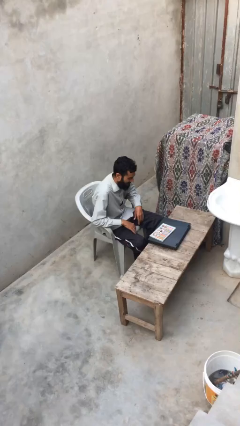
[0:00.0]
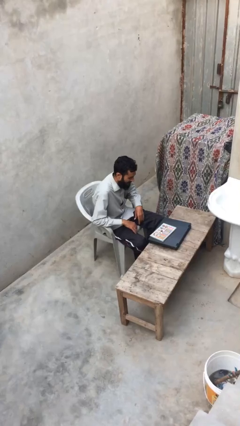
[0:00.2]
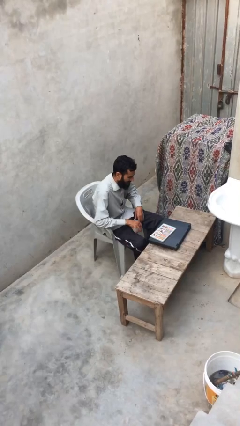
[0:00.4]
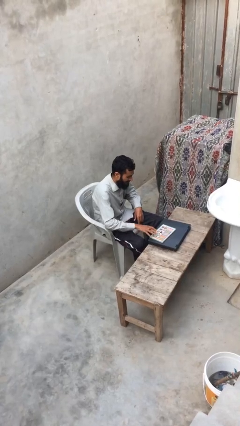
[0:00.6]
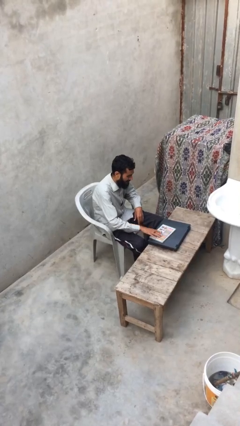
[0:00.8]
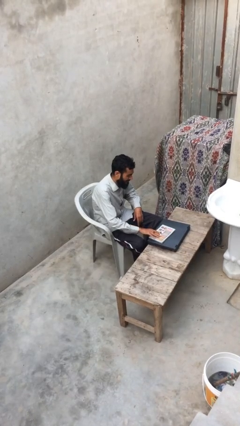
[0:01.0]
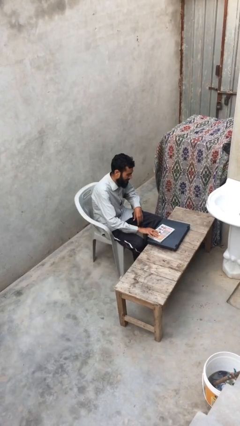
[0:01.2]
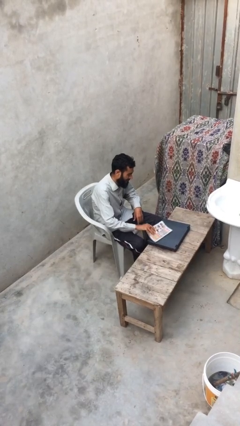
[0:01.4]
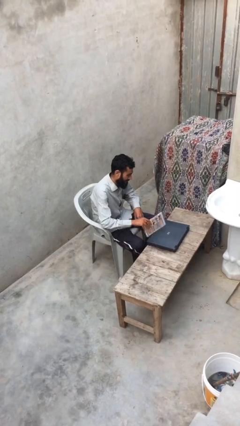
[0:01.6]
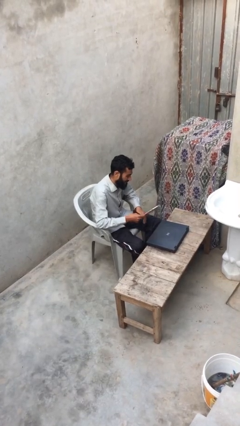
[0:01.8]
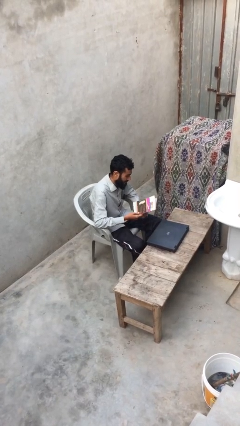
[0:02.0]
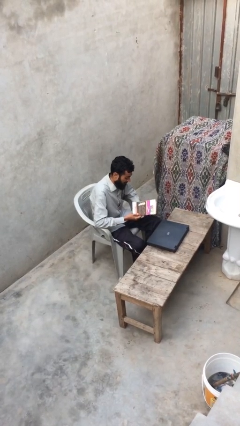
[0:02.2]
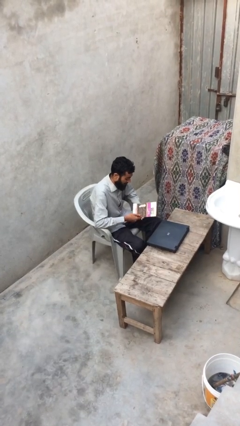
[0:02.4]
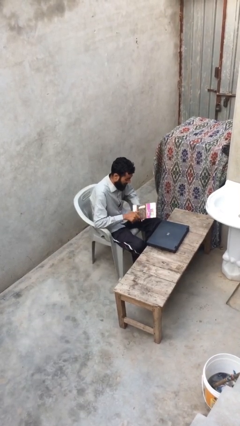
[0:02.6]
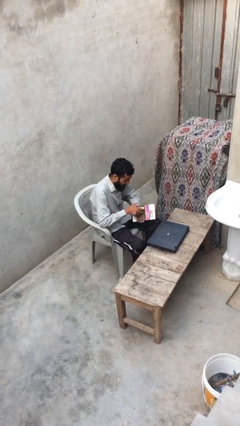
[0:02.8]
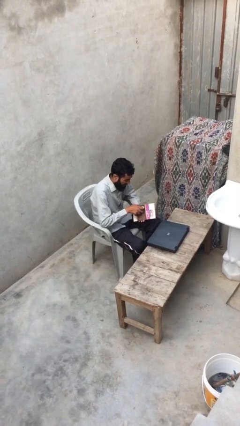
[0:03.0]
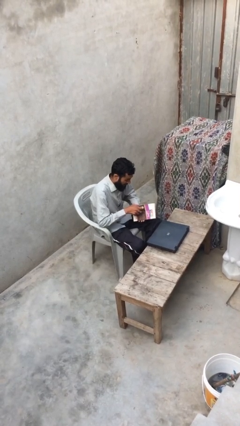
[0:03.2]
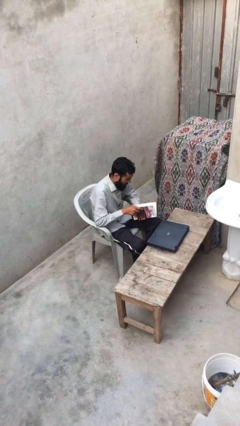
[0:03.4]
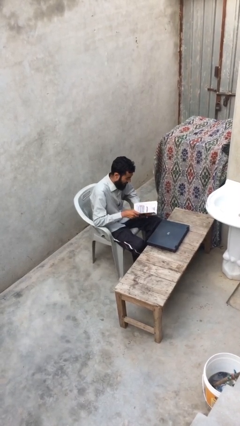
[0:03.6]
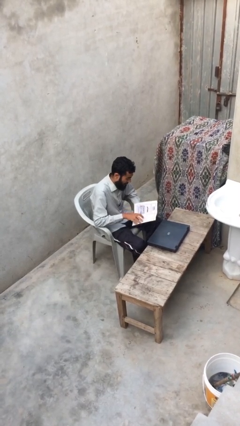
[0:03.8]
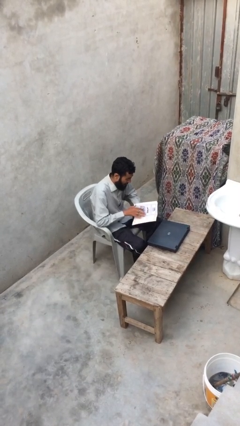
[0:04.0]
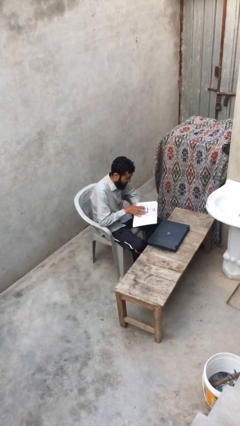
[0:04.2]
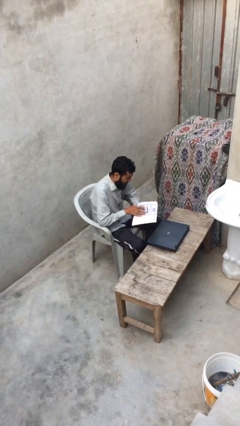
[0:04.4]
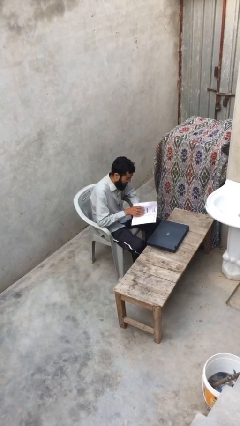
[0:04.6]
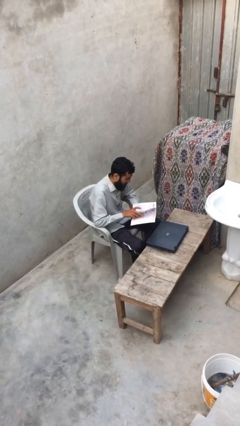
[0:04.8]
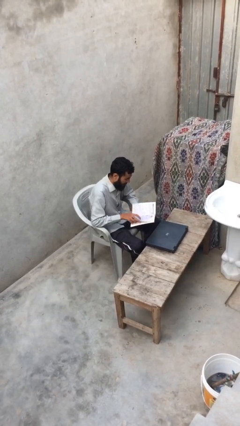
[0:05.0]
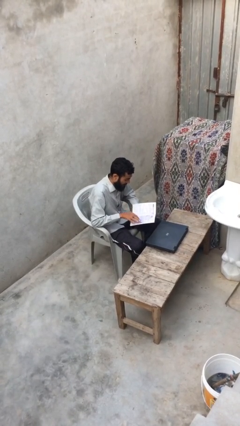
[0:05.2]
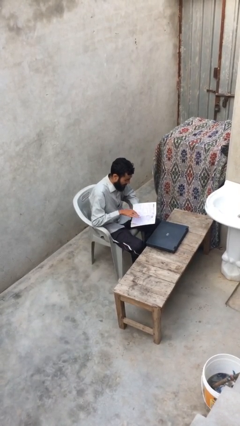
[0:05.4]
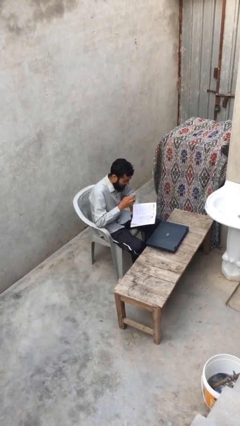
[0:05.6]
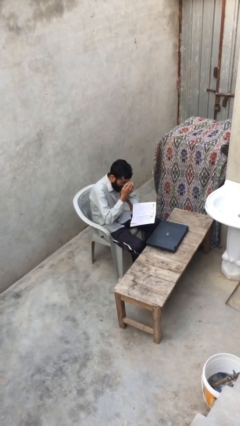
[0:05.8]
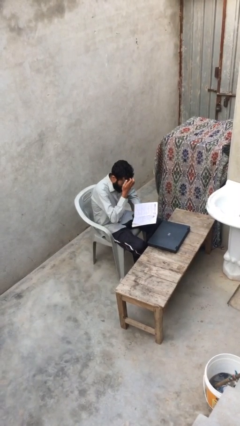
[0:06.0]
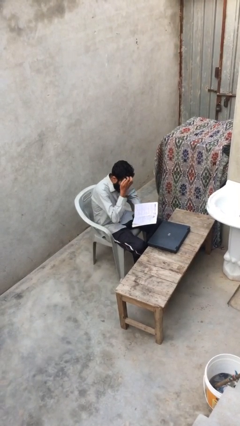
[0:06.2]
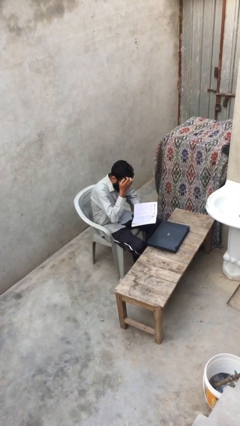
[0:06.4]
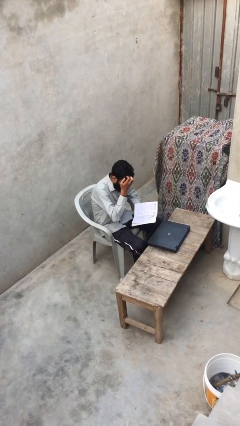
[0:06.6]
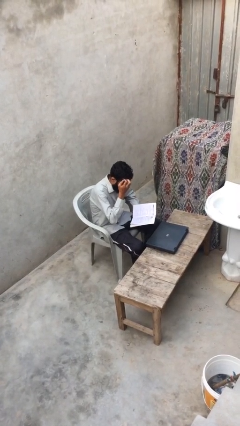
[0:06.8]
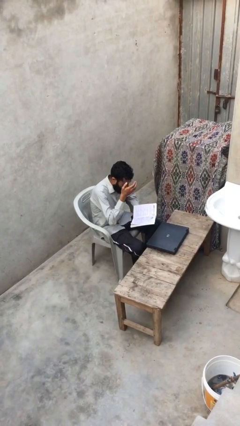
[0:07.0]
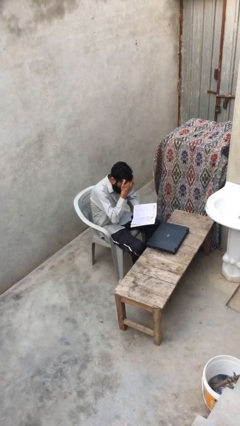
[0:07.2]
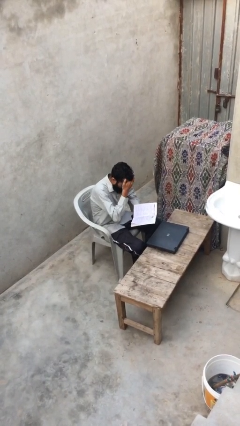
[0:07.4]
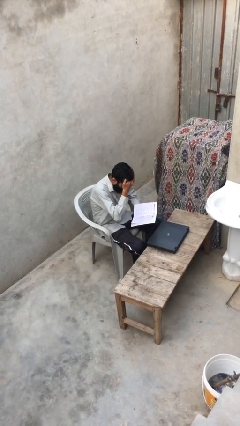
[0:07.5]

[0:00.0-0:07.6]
person reads document

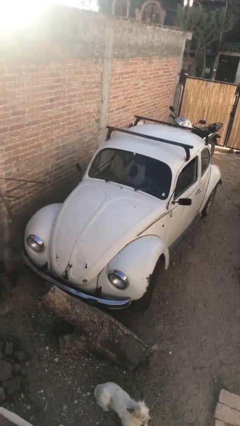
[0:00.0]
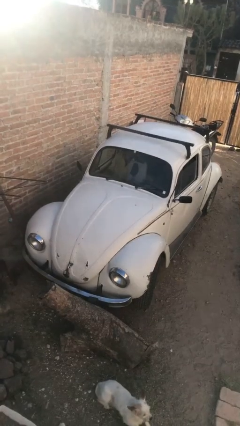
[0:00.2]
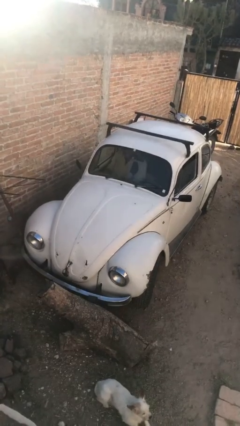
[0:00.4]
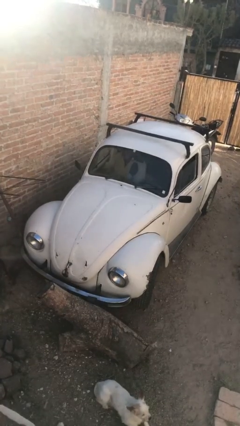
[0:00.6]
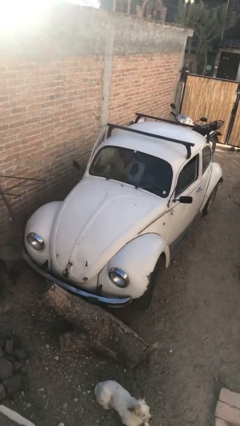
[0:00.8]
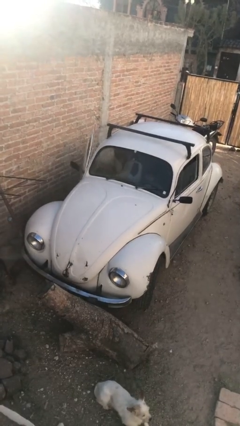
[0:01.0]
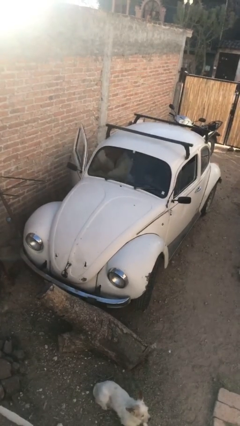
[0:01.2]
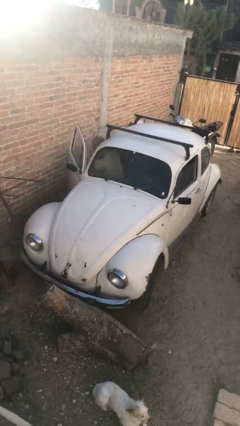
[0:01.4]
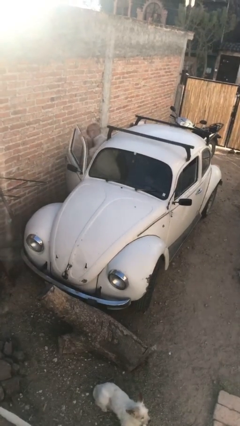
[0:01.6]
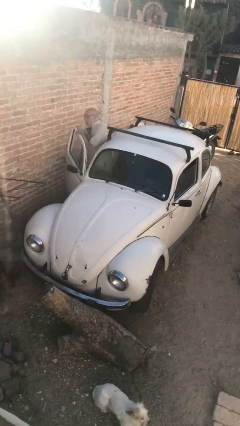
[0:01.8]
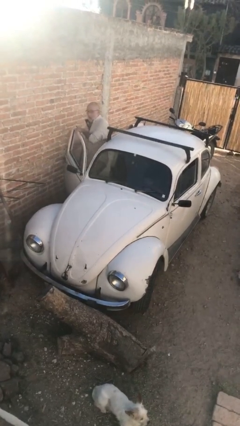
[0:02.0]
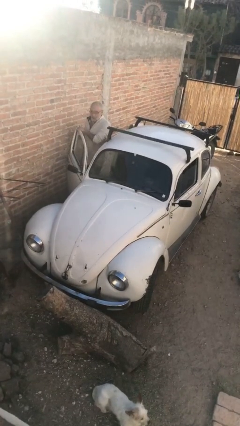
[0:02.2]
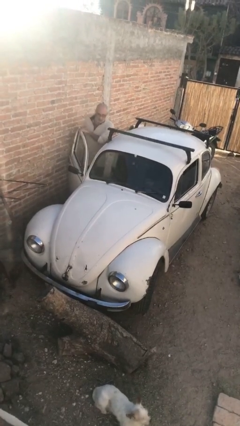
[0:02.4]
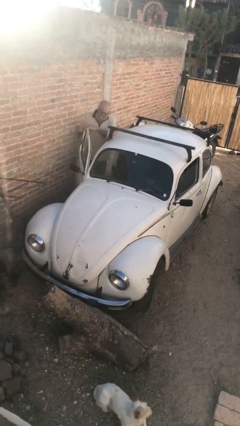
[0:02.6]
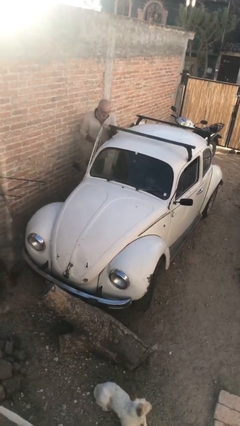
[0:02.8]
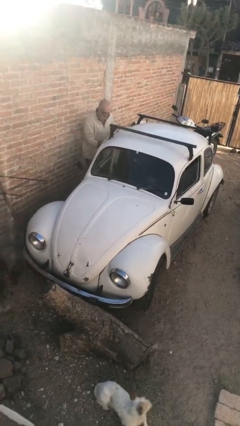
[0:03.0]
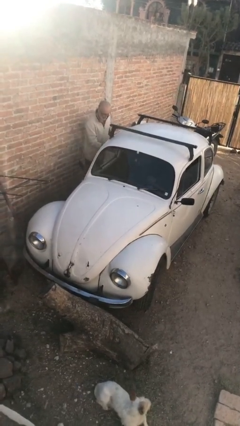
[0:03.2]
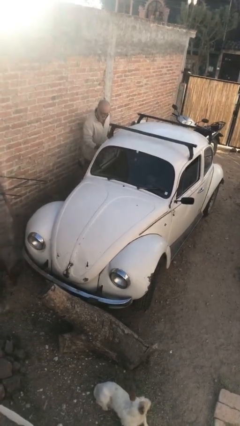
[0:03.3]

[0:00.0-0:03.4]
car drops off person

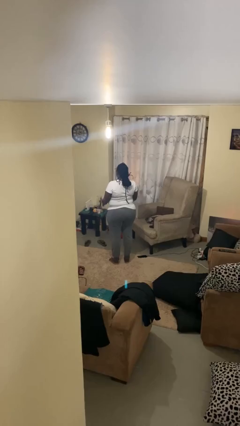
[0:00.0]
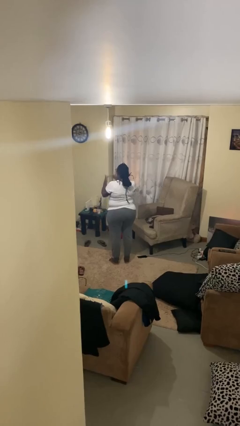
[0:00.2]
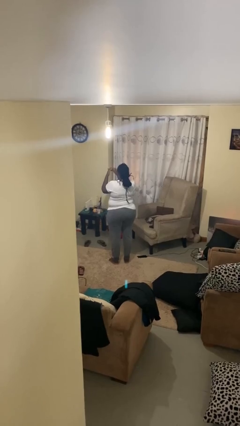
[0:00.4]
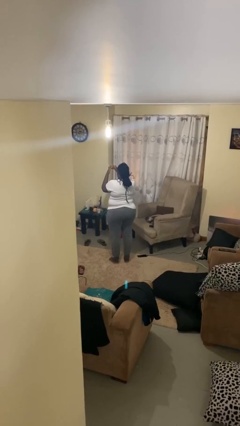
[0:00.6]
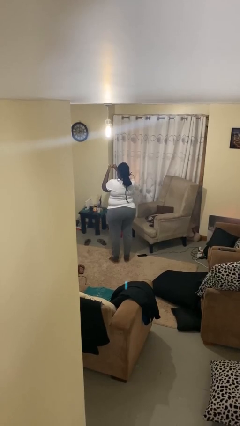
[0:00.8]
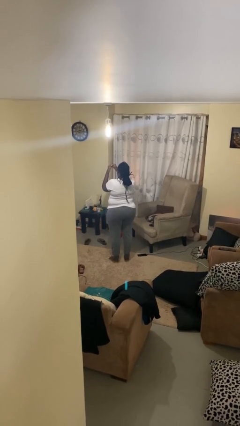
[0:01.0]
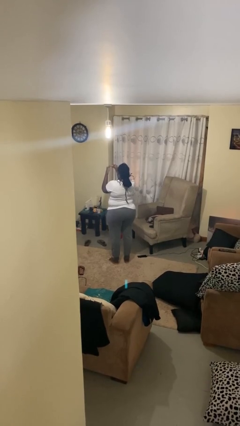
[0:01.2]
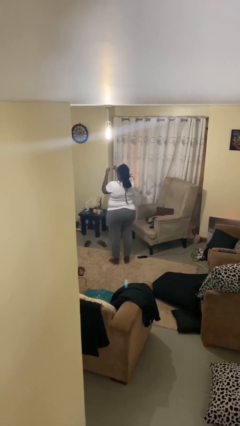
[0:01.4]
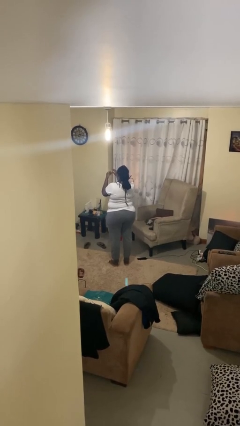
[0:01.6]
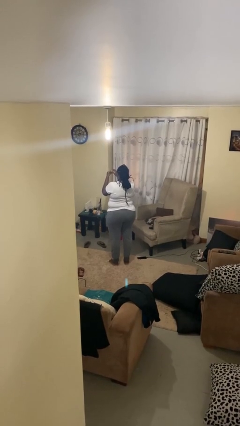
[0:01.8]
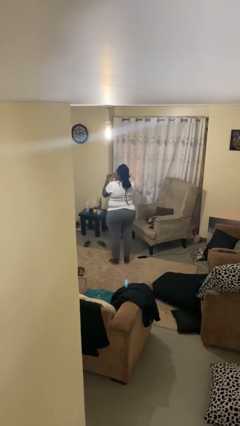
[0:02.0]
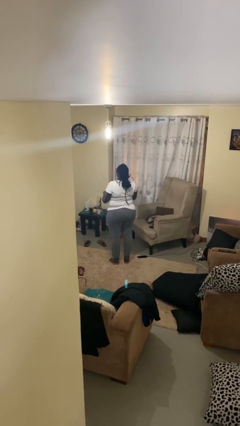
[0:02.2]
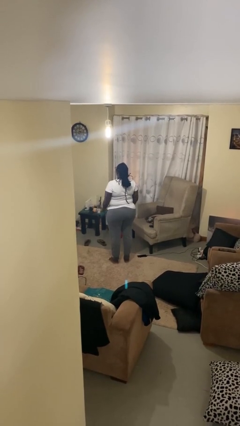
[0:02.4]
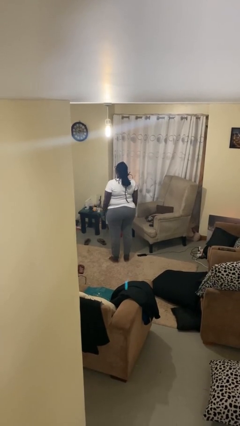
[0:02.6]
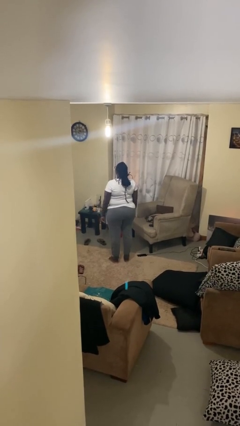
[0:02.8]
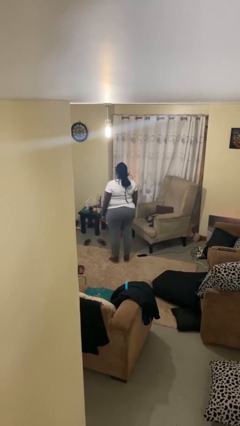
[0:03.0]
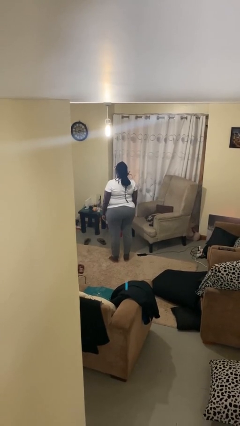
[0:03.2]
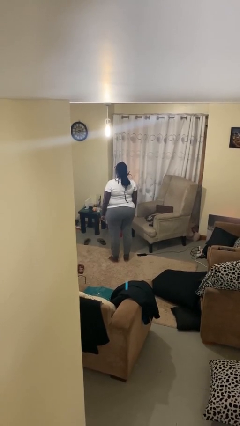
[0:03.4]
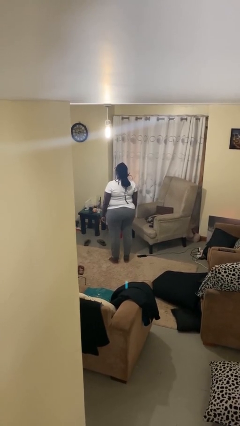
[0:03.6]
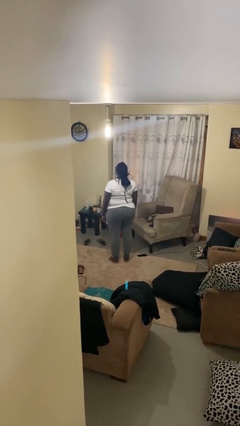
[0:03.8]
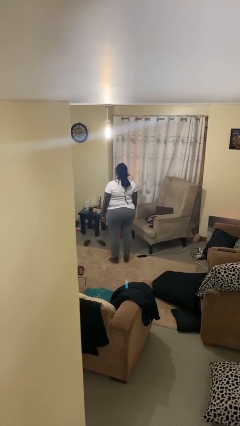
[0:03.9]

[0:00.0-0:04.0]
person takes off ring

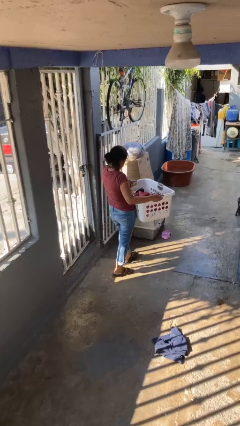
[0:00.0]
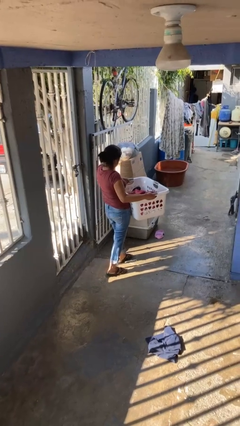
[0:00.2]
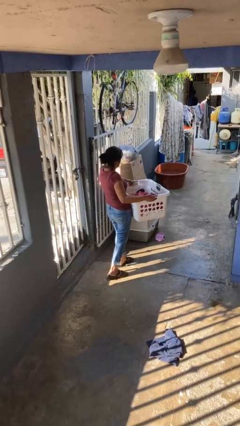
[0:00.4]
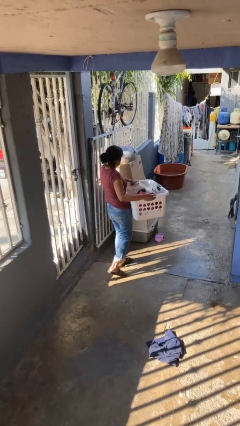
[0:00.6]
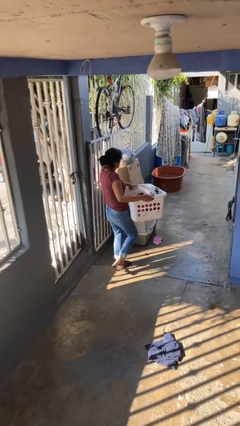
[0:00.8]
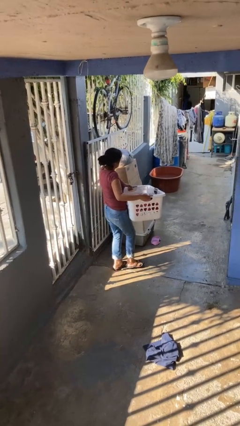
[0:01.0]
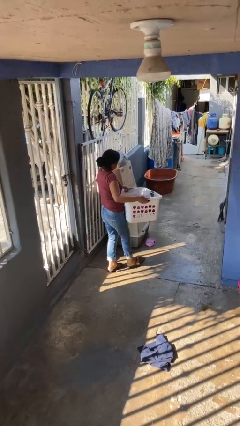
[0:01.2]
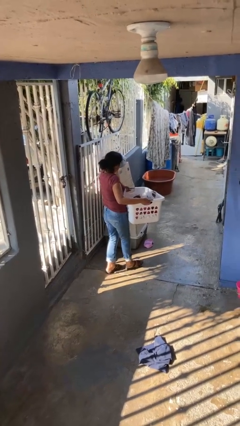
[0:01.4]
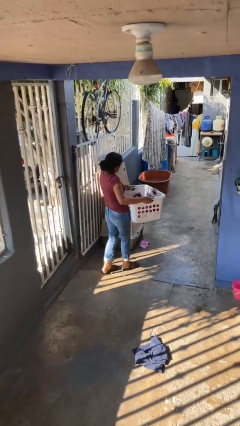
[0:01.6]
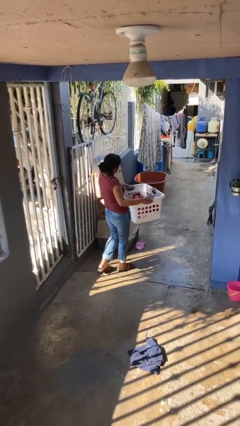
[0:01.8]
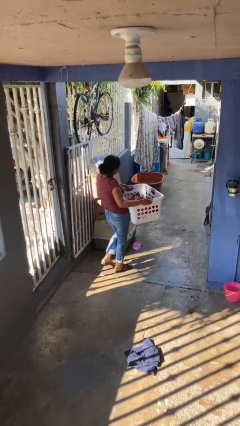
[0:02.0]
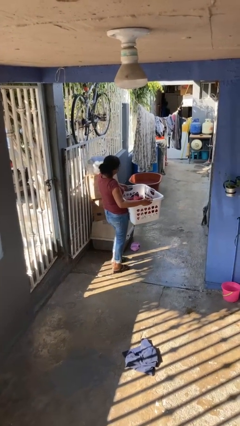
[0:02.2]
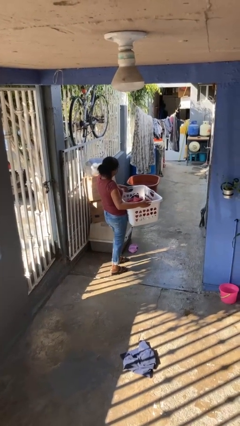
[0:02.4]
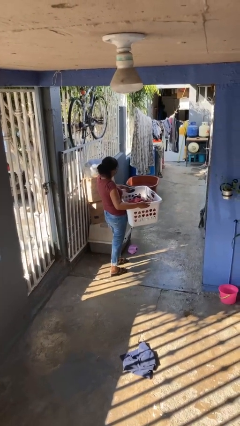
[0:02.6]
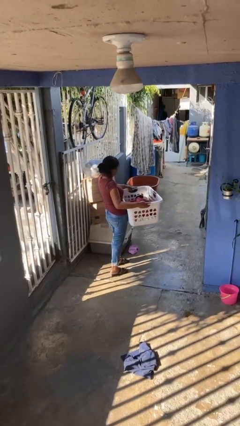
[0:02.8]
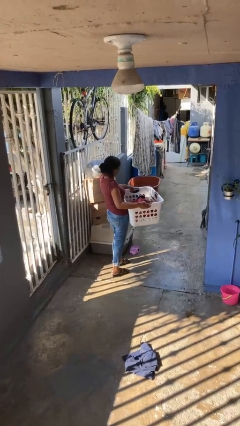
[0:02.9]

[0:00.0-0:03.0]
person carries laundry basket
